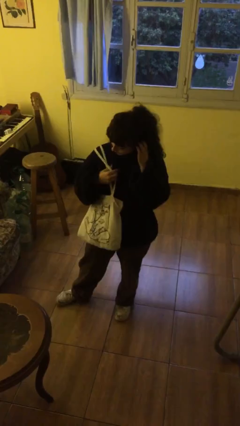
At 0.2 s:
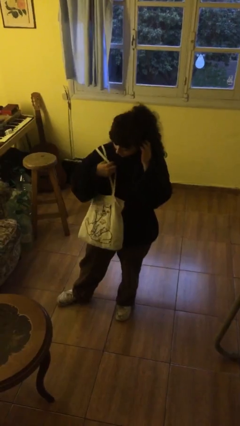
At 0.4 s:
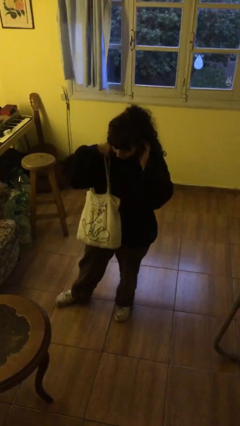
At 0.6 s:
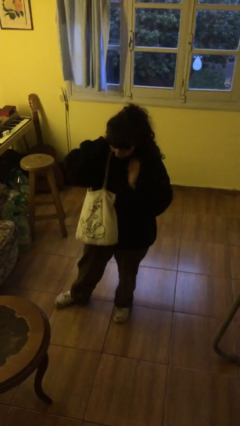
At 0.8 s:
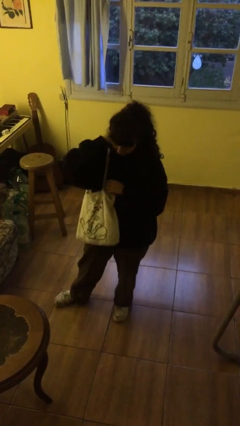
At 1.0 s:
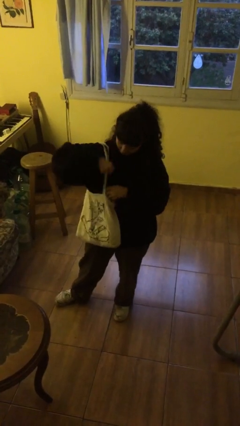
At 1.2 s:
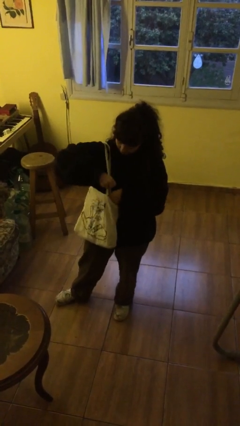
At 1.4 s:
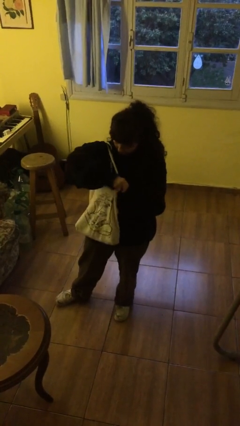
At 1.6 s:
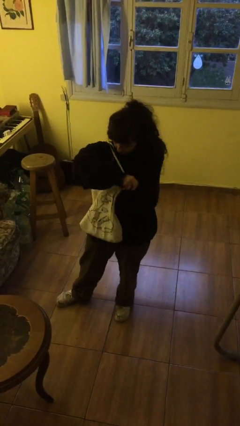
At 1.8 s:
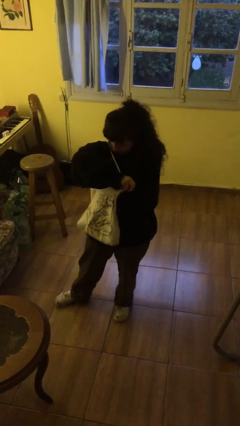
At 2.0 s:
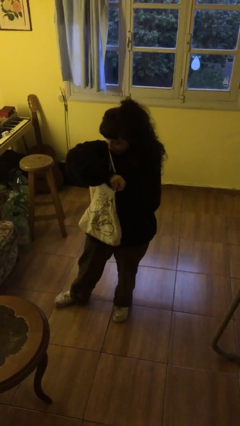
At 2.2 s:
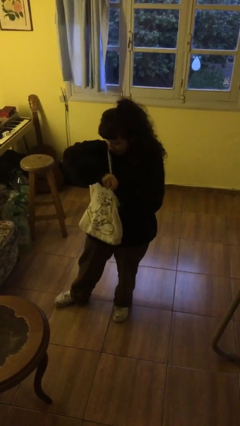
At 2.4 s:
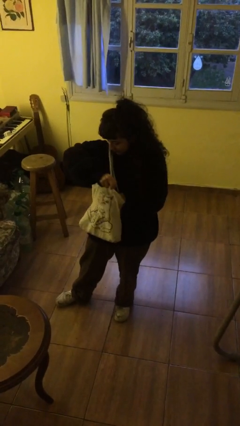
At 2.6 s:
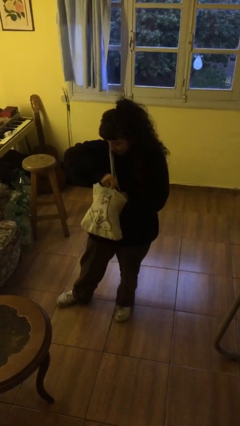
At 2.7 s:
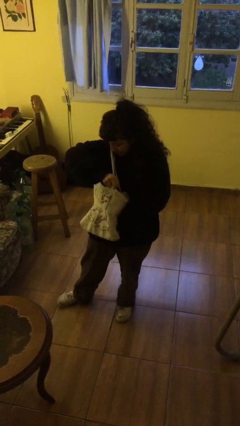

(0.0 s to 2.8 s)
person searches in purse

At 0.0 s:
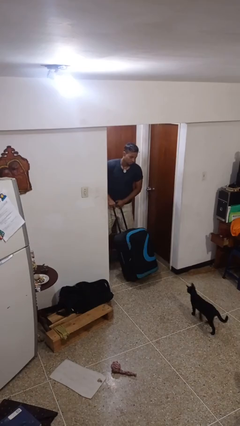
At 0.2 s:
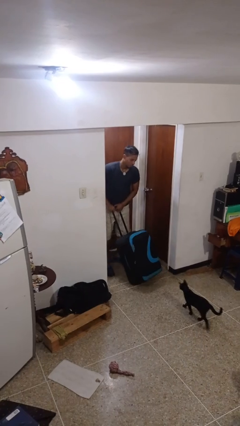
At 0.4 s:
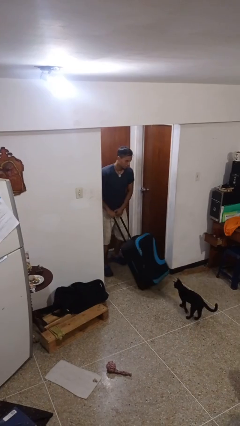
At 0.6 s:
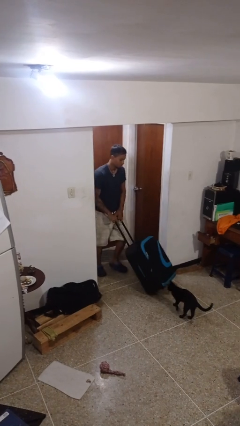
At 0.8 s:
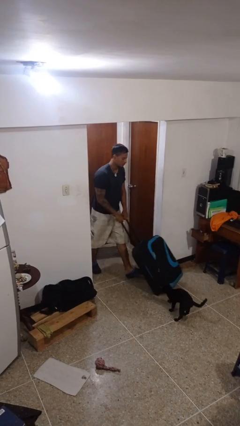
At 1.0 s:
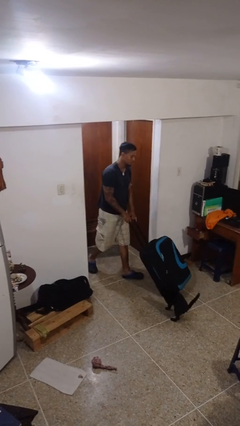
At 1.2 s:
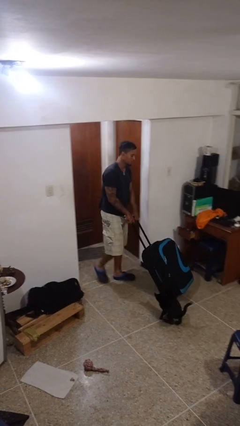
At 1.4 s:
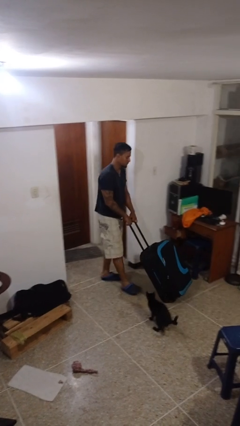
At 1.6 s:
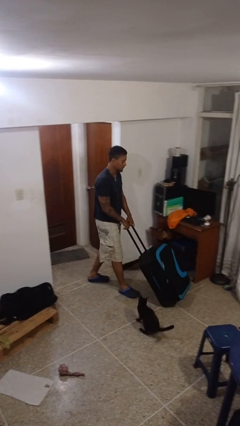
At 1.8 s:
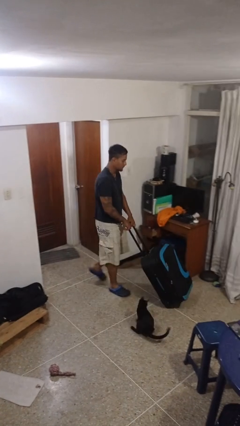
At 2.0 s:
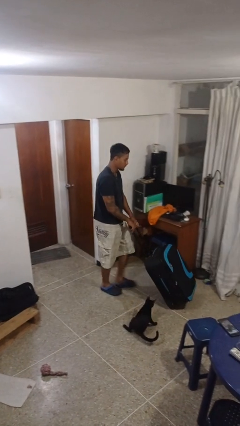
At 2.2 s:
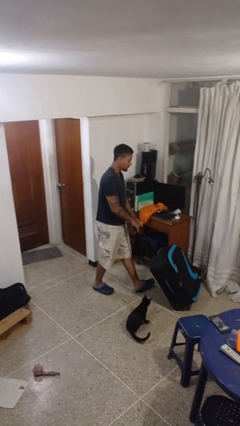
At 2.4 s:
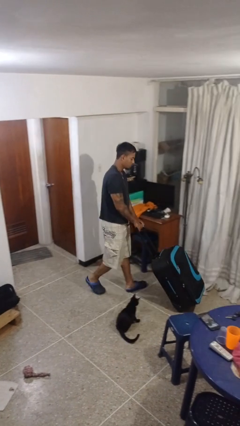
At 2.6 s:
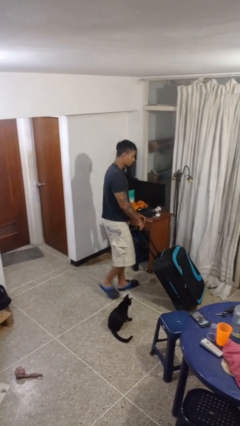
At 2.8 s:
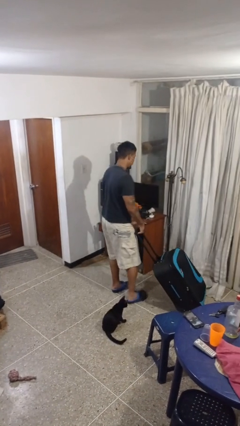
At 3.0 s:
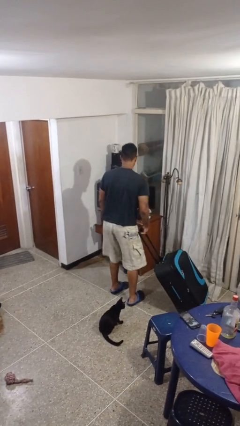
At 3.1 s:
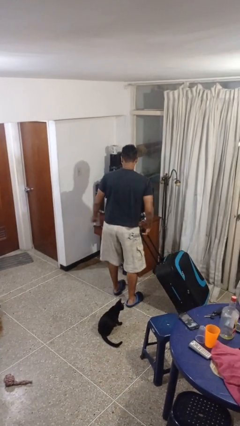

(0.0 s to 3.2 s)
person pushes wheeled cart

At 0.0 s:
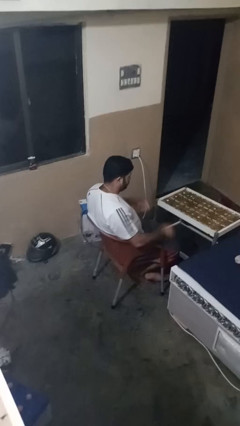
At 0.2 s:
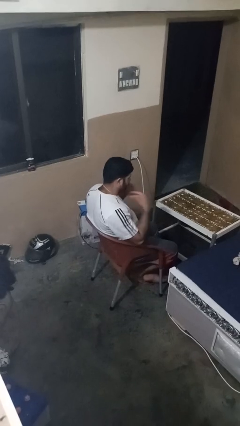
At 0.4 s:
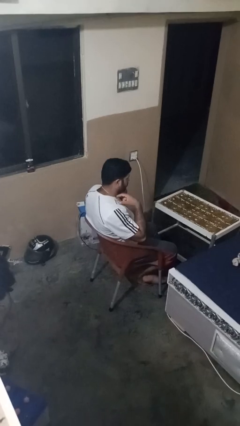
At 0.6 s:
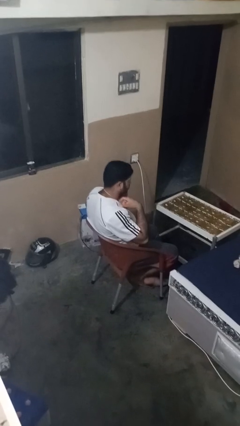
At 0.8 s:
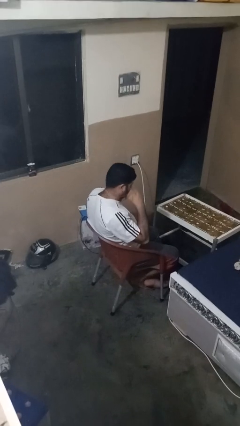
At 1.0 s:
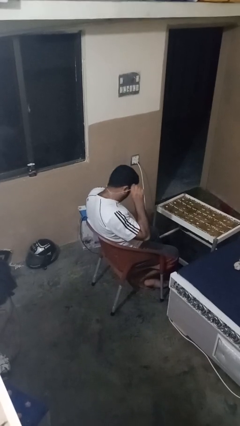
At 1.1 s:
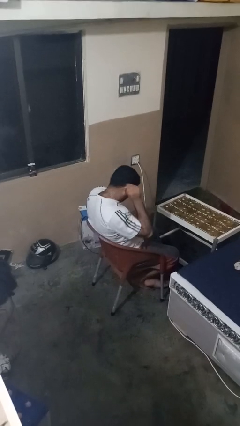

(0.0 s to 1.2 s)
person takes off necklace

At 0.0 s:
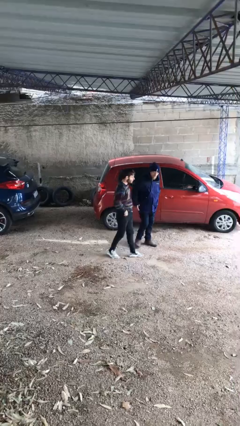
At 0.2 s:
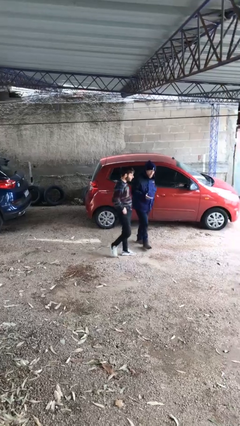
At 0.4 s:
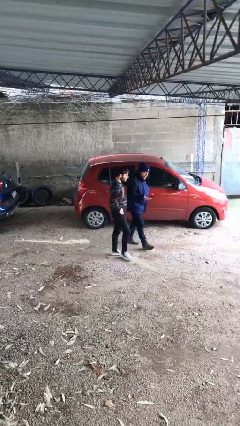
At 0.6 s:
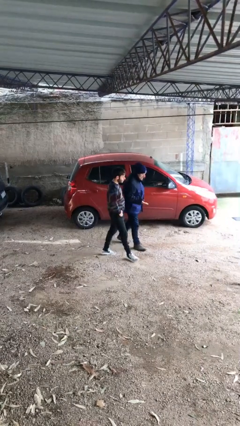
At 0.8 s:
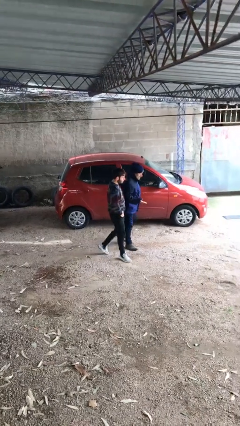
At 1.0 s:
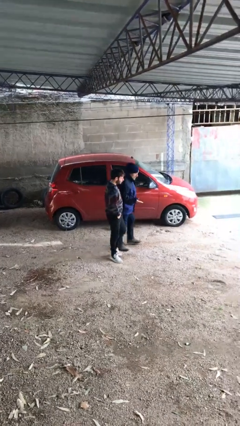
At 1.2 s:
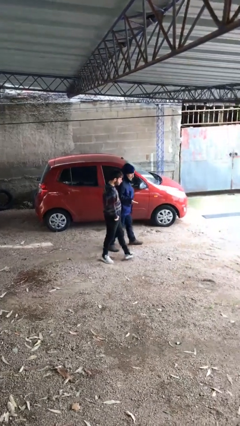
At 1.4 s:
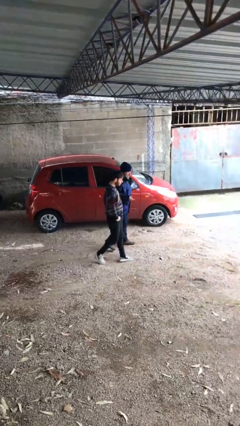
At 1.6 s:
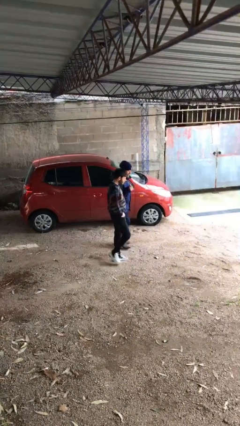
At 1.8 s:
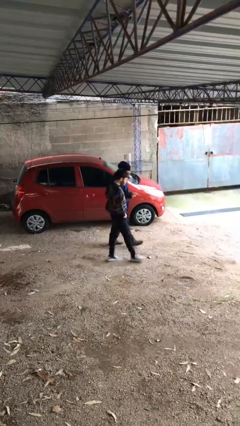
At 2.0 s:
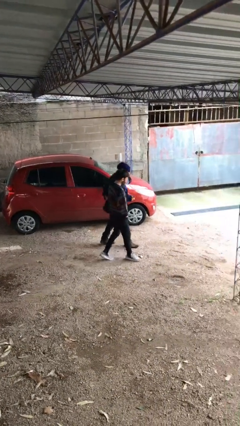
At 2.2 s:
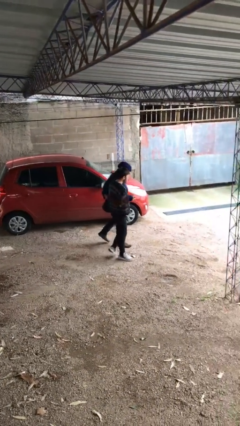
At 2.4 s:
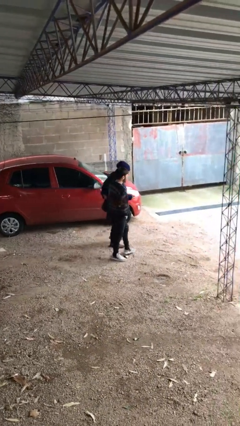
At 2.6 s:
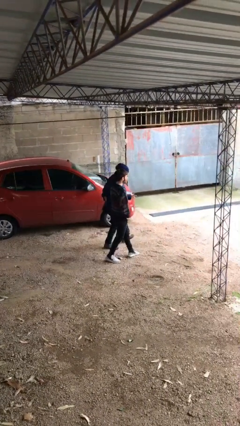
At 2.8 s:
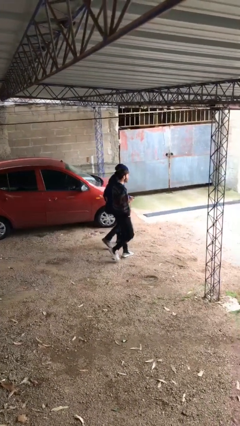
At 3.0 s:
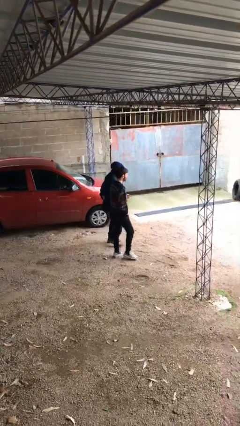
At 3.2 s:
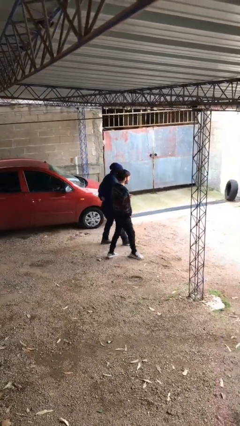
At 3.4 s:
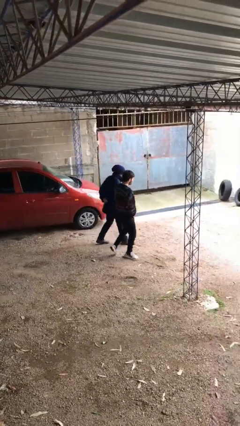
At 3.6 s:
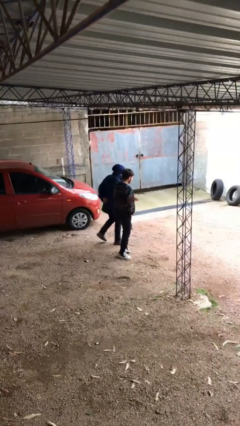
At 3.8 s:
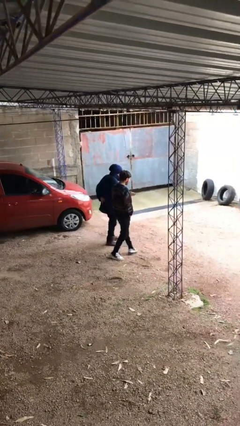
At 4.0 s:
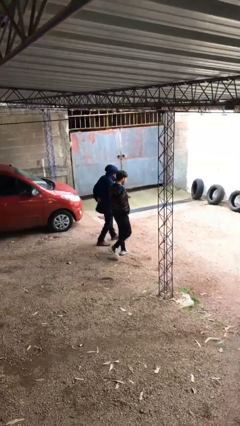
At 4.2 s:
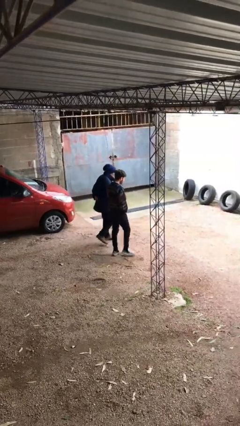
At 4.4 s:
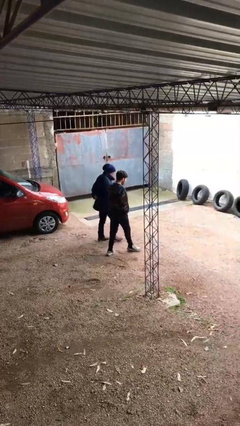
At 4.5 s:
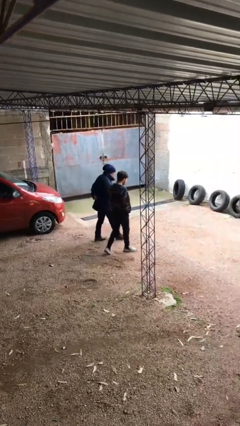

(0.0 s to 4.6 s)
person talks to person

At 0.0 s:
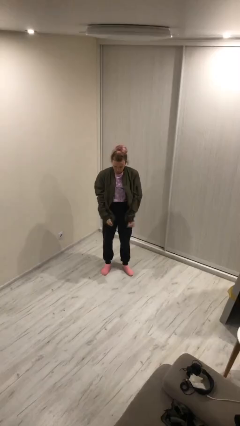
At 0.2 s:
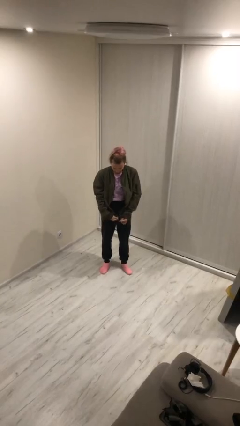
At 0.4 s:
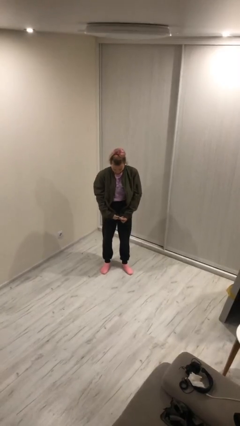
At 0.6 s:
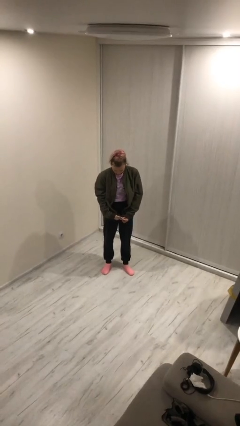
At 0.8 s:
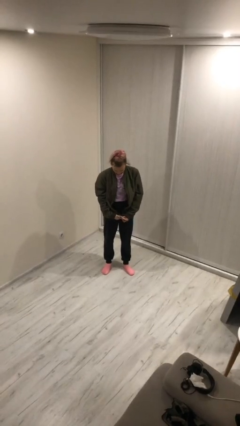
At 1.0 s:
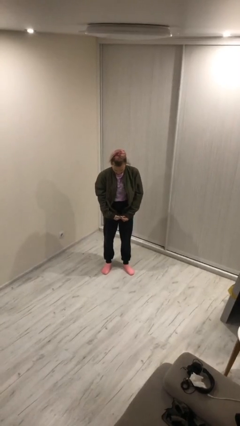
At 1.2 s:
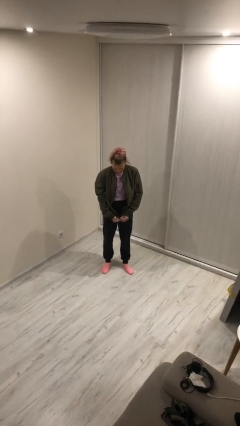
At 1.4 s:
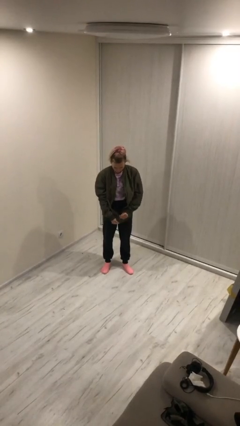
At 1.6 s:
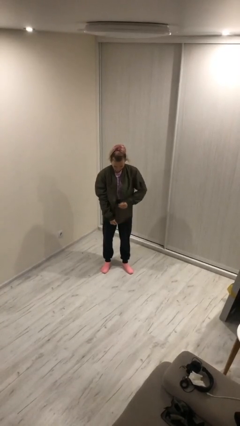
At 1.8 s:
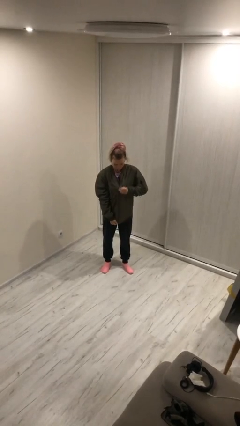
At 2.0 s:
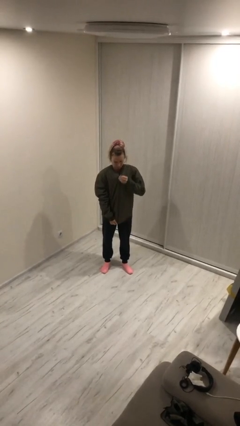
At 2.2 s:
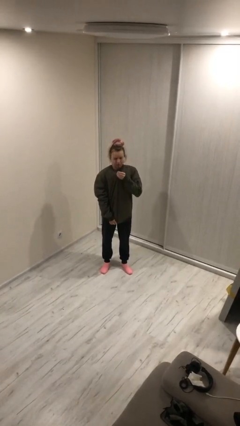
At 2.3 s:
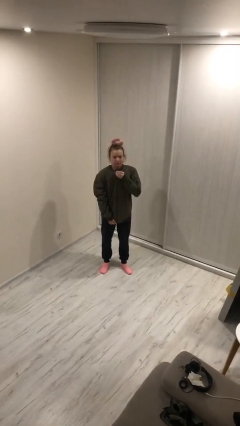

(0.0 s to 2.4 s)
person zips up jacket

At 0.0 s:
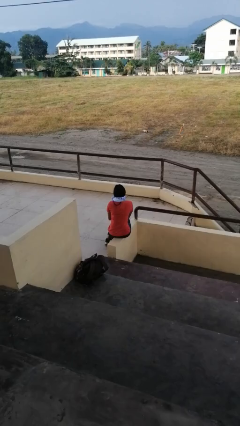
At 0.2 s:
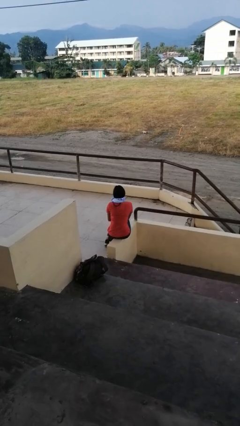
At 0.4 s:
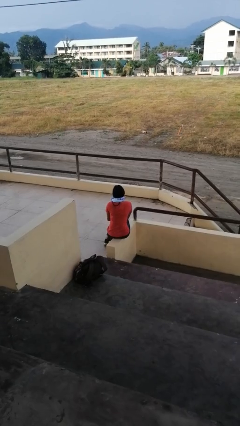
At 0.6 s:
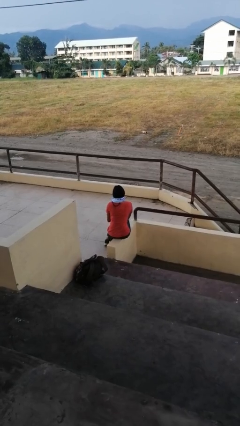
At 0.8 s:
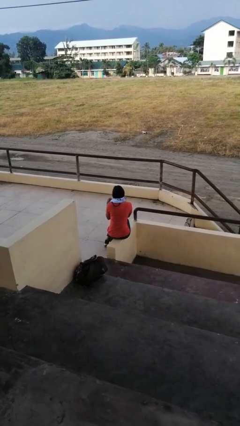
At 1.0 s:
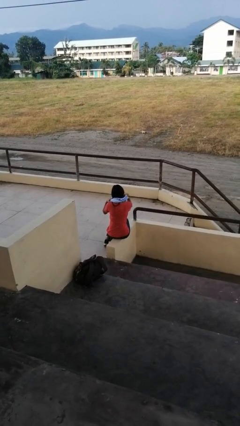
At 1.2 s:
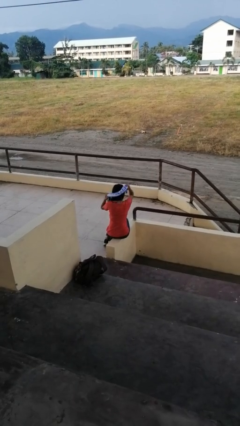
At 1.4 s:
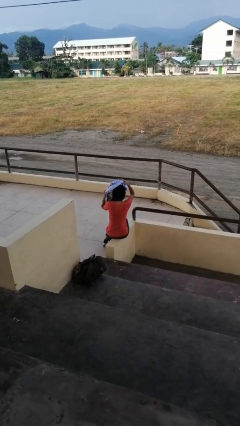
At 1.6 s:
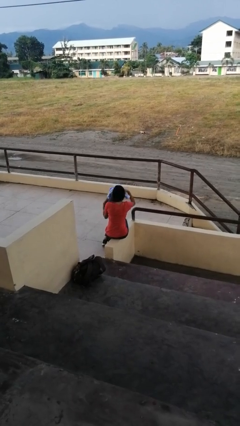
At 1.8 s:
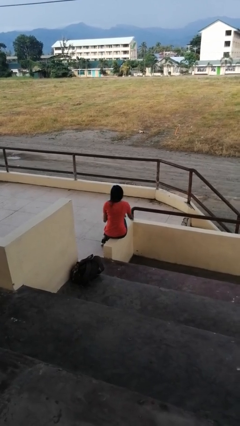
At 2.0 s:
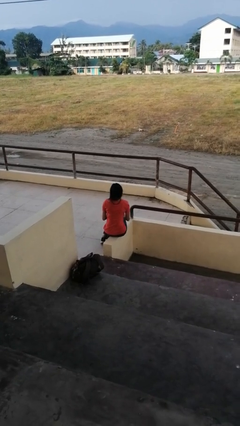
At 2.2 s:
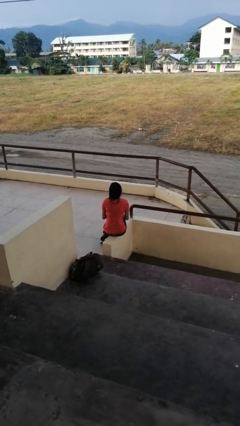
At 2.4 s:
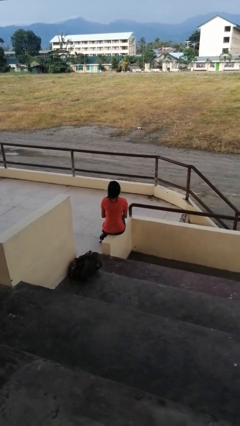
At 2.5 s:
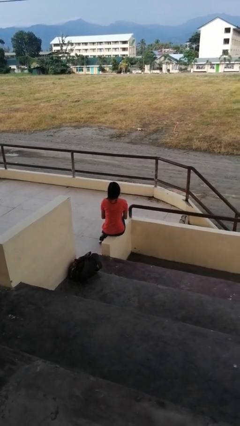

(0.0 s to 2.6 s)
person takes off scarf

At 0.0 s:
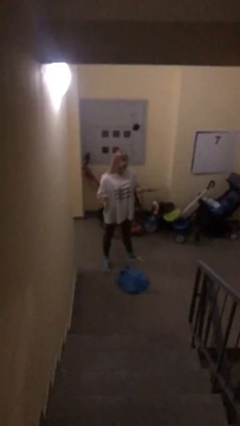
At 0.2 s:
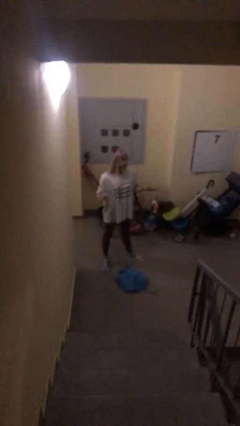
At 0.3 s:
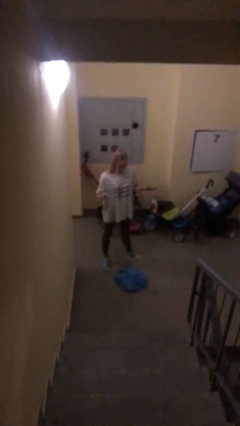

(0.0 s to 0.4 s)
person drops object
